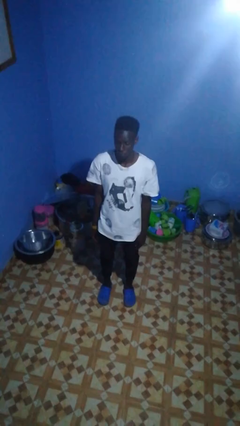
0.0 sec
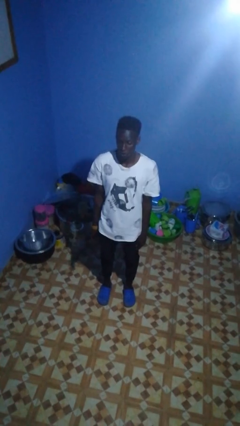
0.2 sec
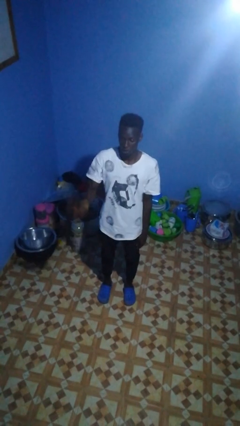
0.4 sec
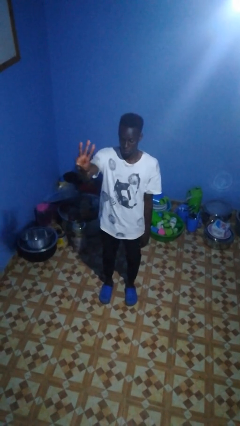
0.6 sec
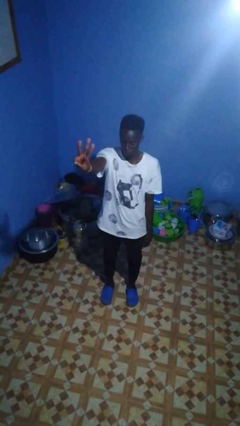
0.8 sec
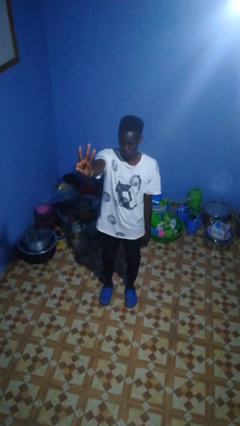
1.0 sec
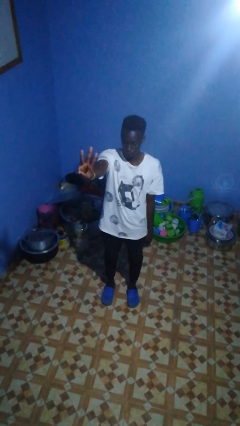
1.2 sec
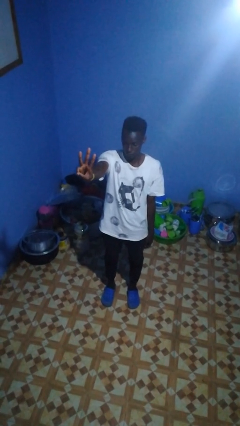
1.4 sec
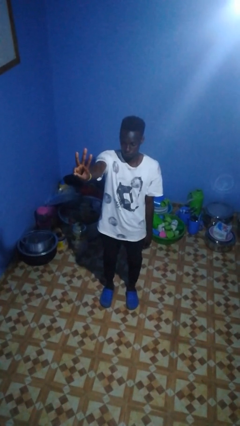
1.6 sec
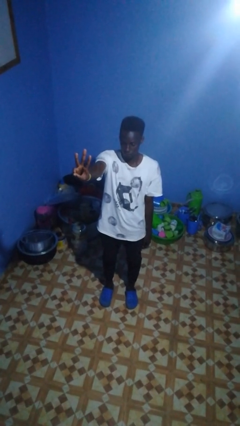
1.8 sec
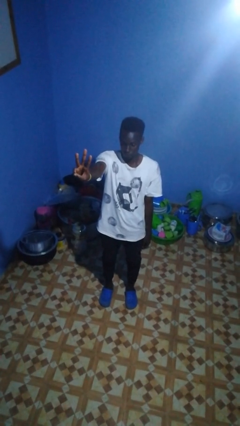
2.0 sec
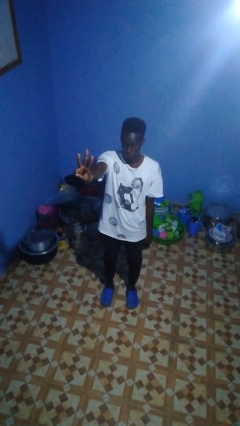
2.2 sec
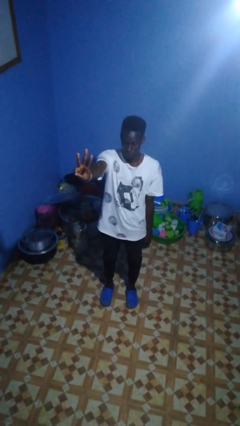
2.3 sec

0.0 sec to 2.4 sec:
person gestures number three

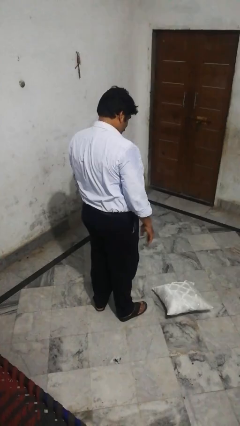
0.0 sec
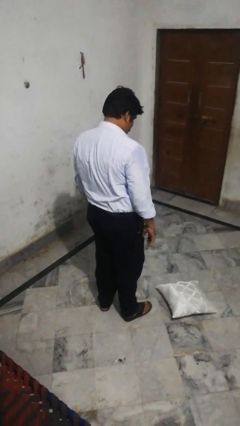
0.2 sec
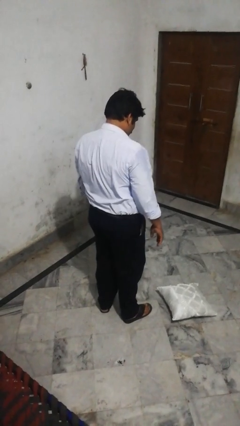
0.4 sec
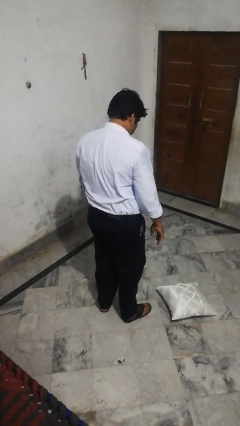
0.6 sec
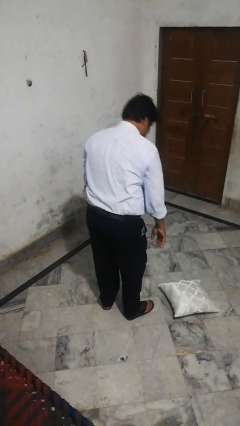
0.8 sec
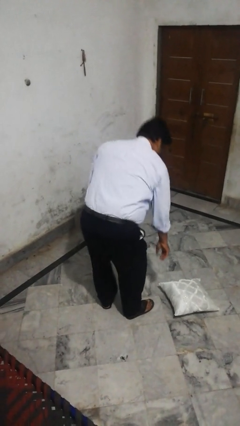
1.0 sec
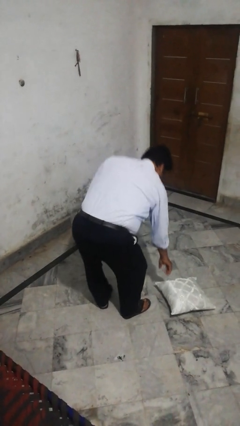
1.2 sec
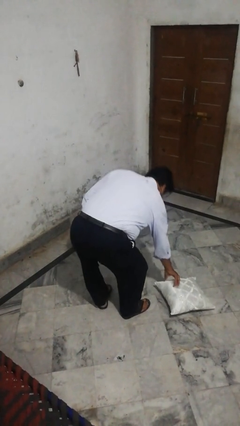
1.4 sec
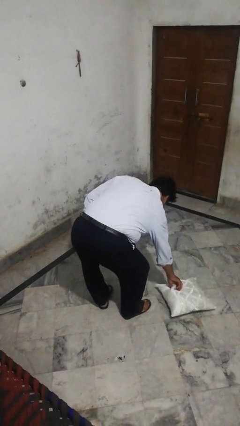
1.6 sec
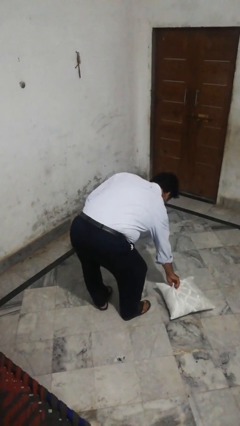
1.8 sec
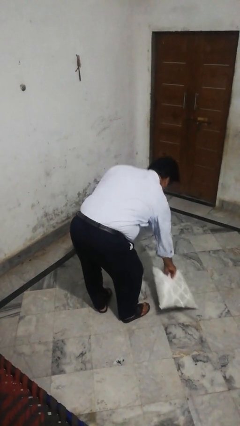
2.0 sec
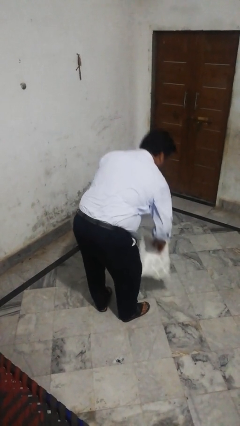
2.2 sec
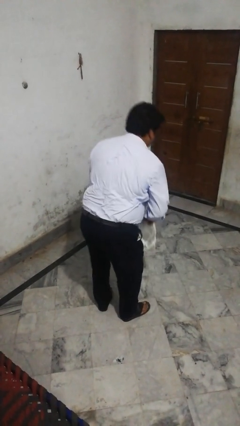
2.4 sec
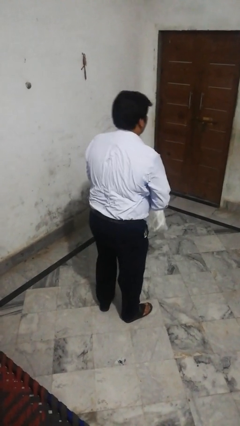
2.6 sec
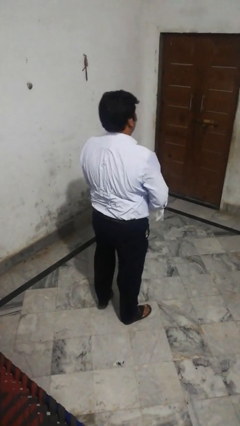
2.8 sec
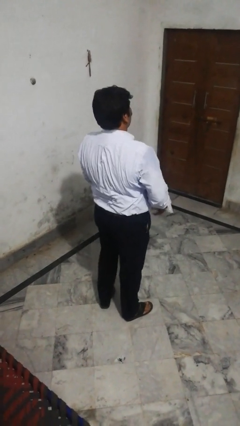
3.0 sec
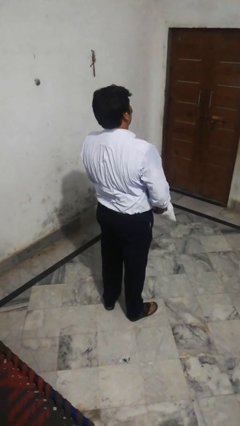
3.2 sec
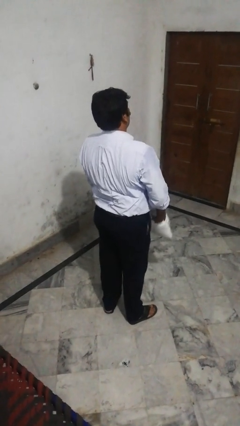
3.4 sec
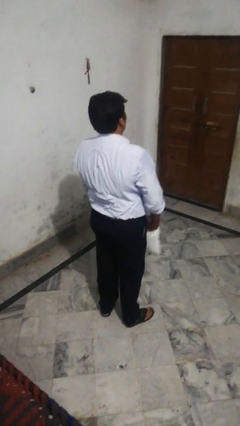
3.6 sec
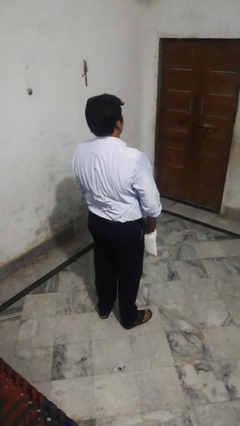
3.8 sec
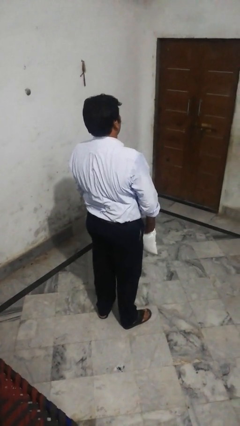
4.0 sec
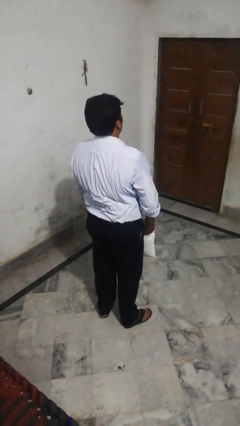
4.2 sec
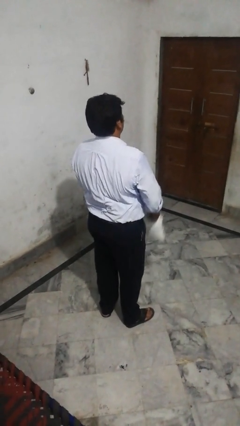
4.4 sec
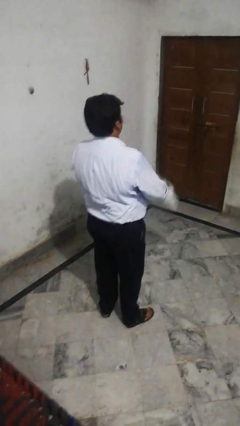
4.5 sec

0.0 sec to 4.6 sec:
person picks up object from floor

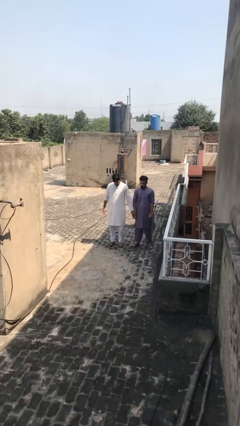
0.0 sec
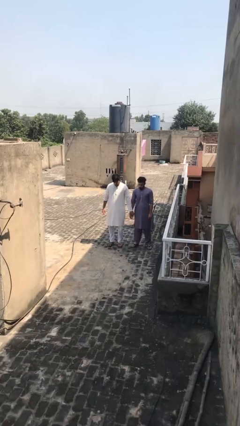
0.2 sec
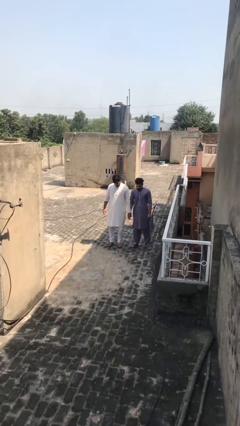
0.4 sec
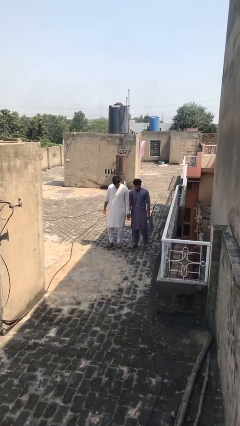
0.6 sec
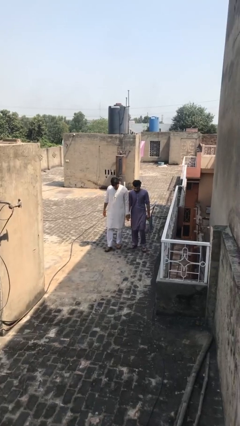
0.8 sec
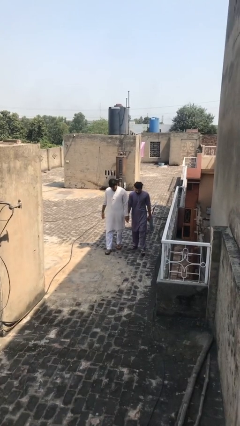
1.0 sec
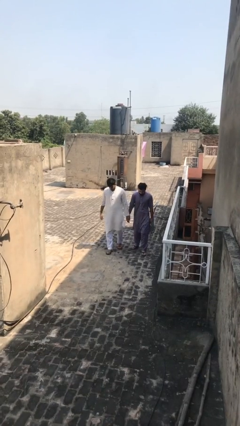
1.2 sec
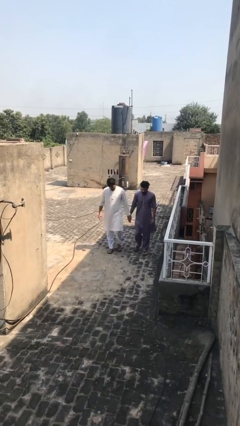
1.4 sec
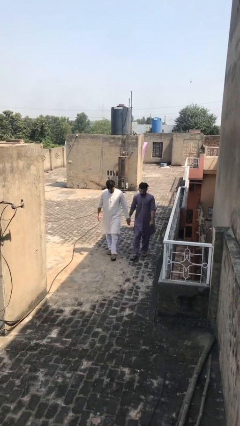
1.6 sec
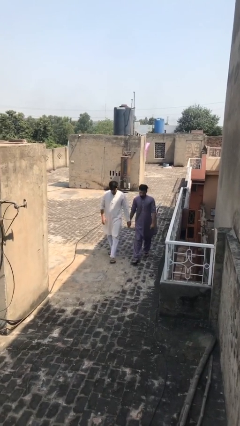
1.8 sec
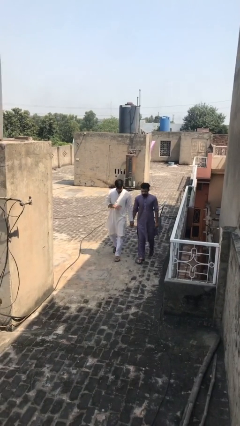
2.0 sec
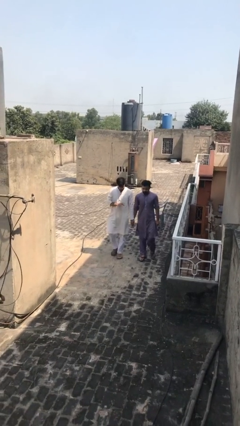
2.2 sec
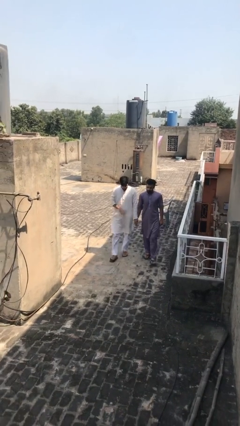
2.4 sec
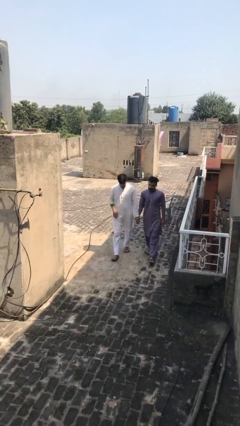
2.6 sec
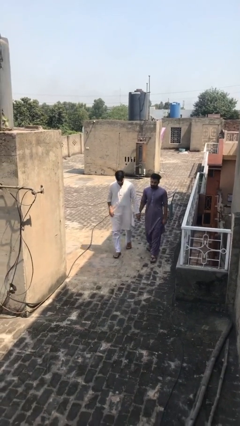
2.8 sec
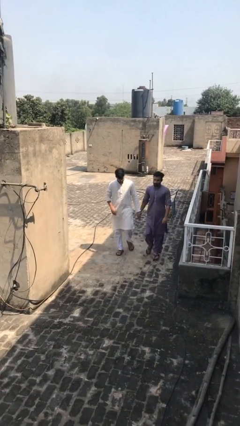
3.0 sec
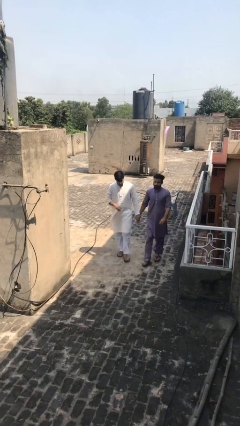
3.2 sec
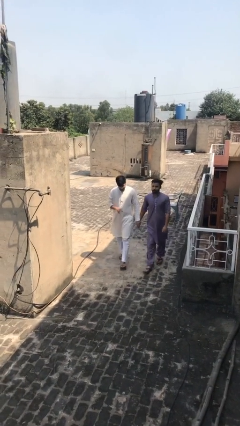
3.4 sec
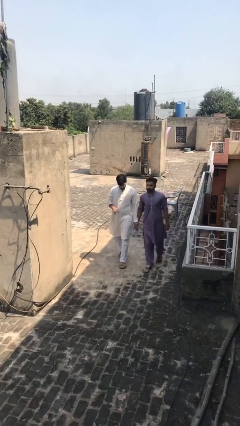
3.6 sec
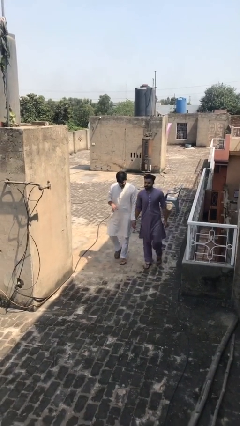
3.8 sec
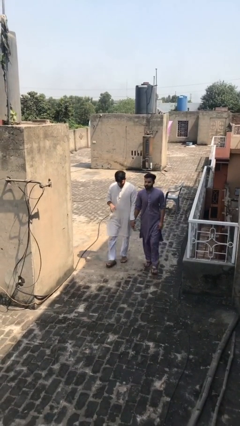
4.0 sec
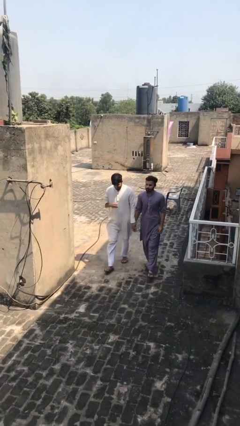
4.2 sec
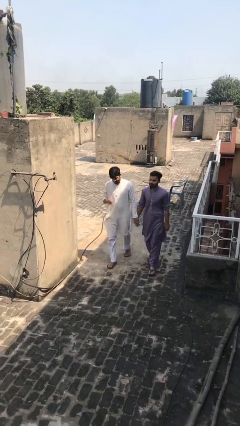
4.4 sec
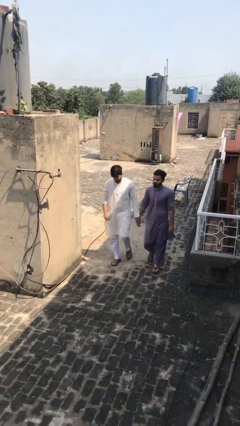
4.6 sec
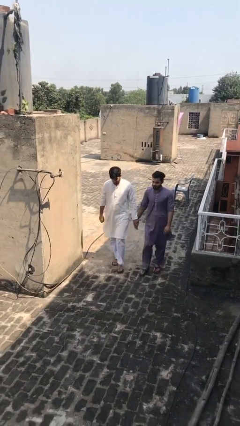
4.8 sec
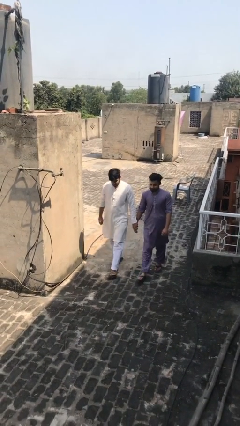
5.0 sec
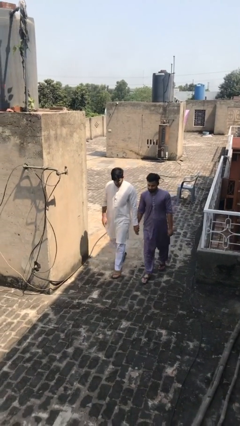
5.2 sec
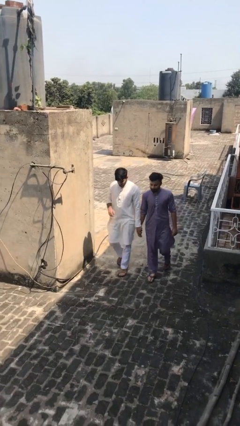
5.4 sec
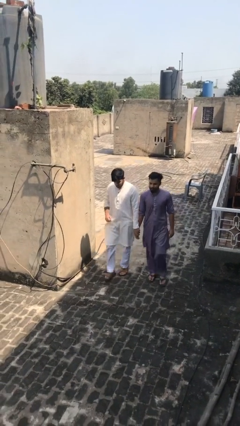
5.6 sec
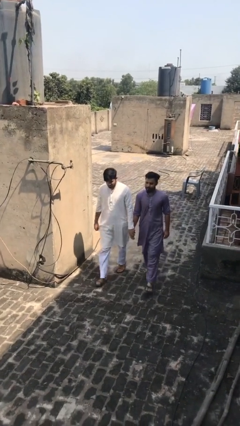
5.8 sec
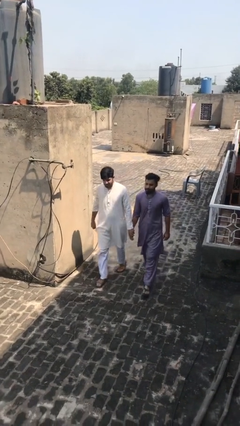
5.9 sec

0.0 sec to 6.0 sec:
person holds hand

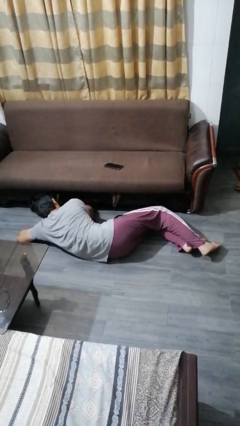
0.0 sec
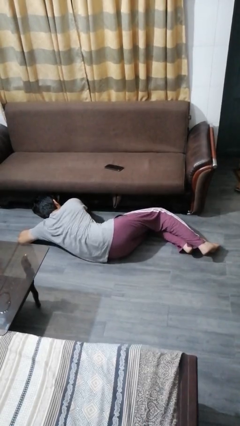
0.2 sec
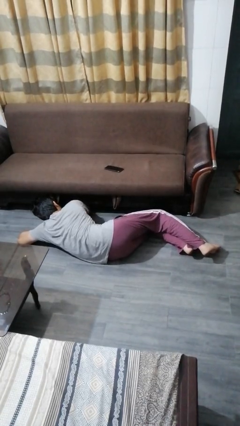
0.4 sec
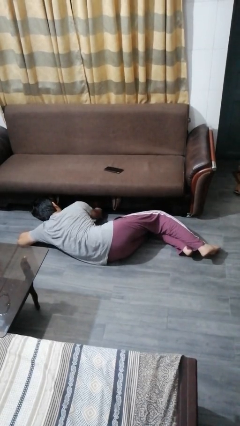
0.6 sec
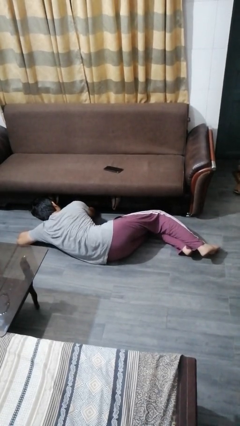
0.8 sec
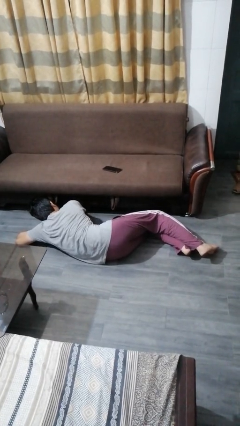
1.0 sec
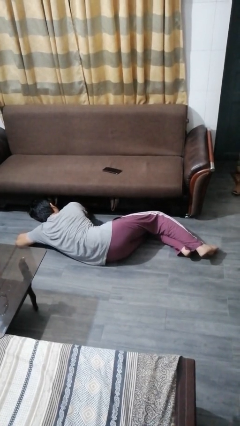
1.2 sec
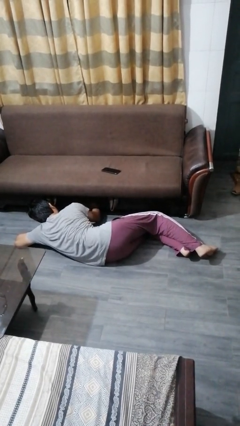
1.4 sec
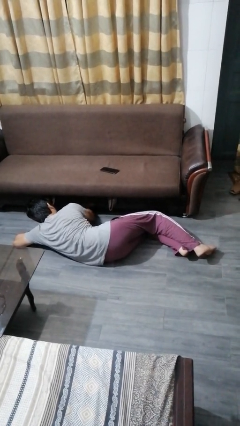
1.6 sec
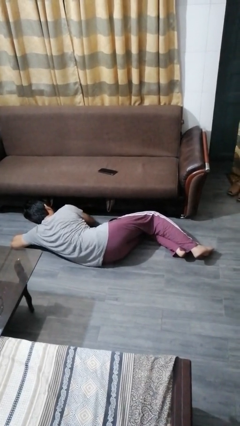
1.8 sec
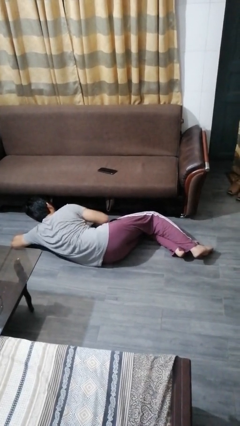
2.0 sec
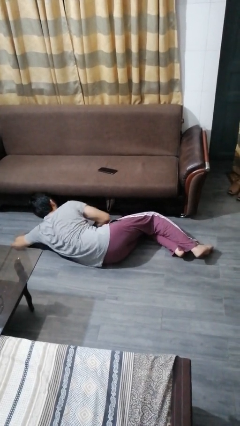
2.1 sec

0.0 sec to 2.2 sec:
person searches under couch

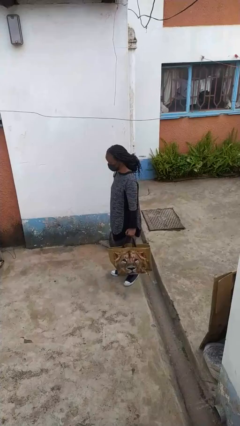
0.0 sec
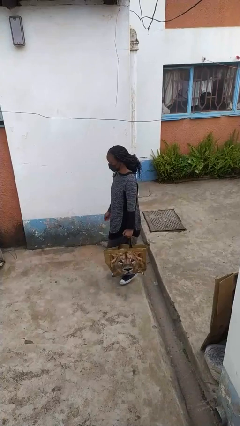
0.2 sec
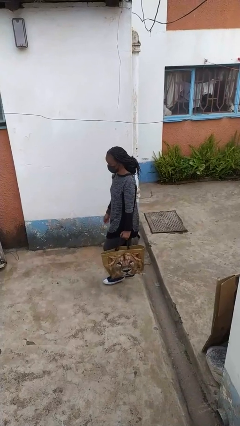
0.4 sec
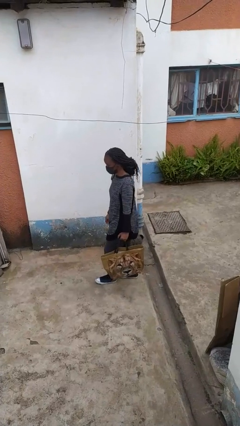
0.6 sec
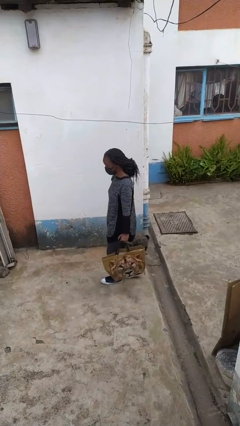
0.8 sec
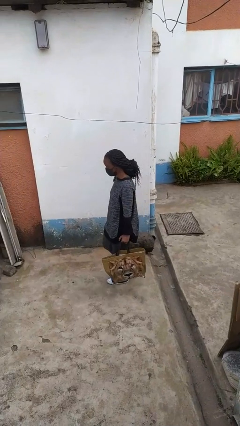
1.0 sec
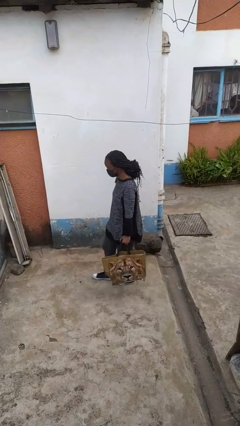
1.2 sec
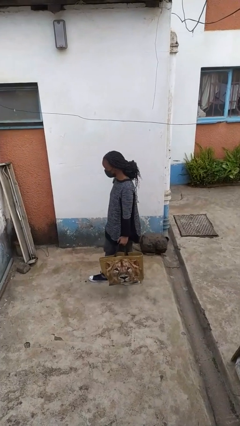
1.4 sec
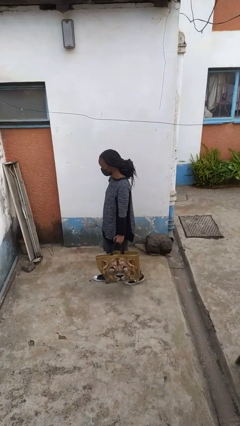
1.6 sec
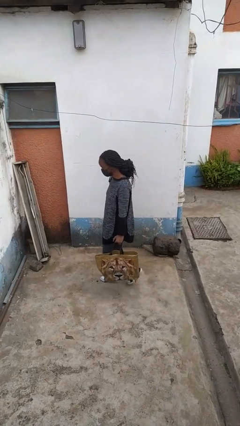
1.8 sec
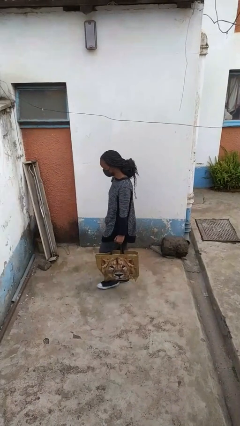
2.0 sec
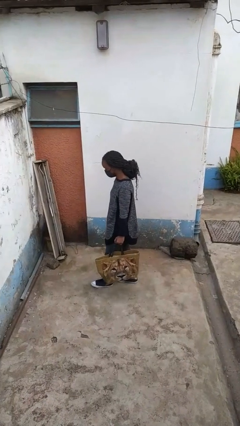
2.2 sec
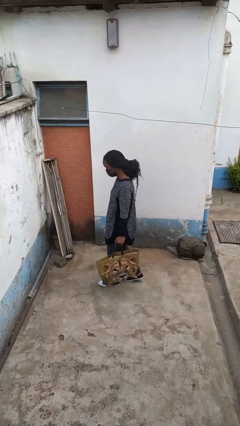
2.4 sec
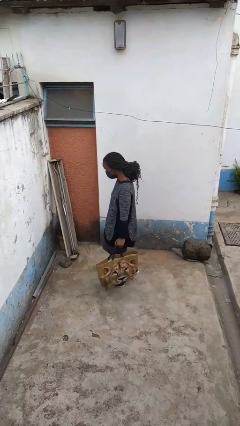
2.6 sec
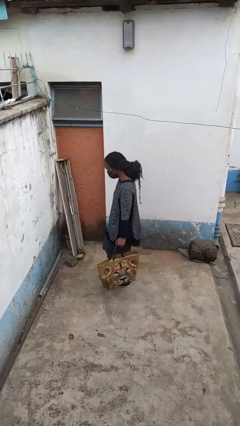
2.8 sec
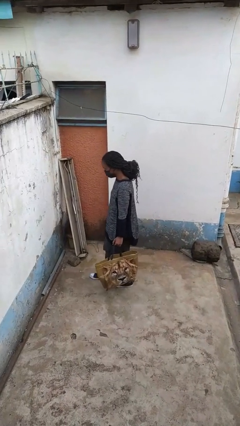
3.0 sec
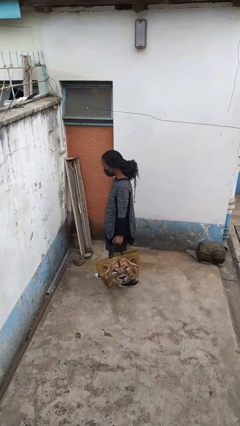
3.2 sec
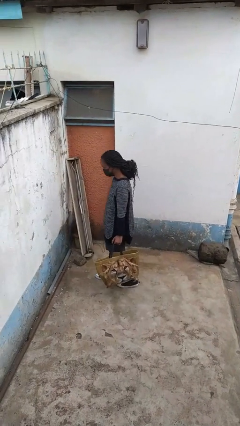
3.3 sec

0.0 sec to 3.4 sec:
person carries groceries
